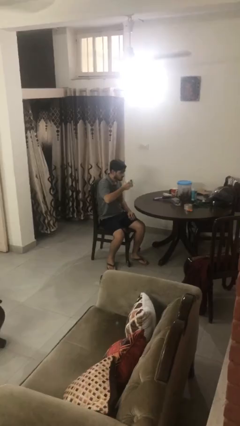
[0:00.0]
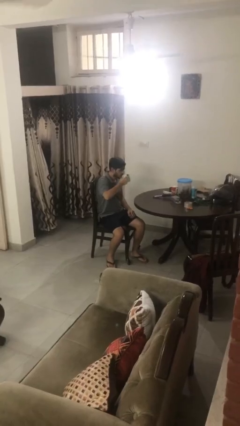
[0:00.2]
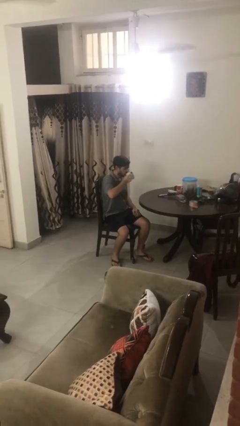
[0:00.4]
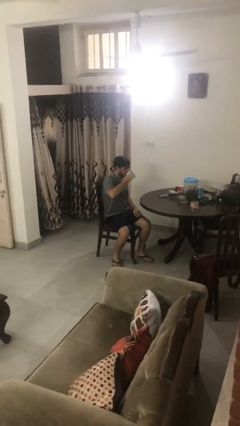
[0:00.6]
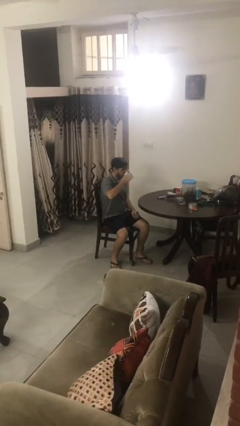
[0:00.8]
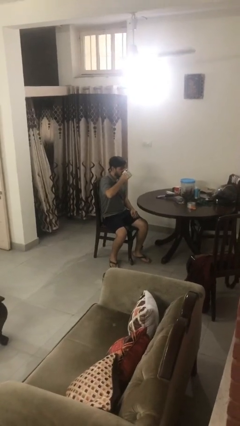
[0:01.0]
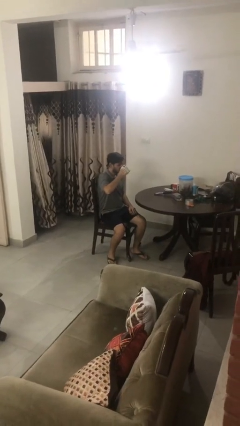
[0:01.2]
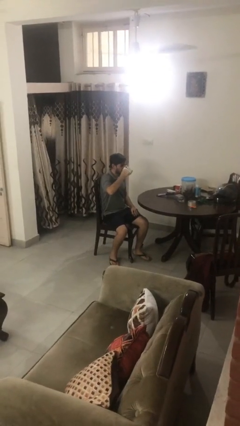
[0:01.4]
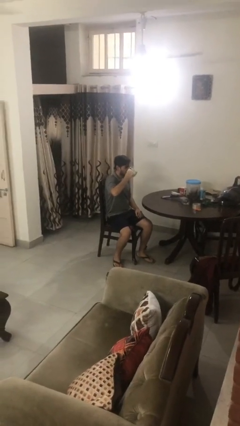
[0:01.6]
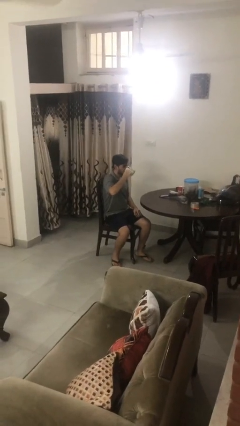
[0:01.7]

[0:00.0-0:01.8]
person drinks from mug

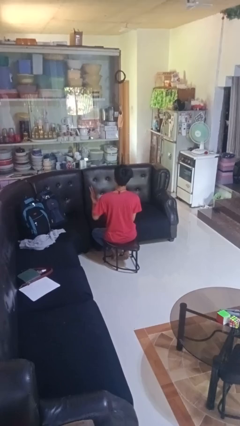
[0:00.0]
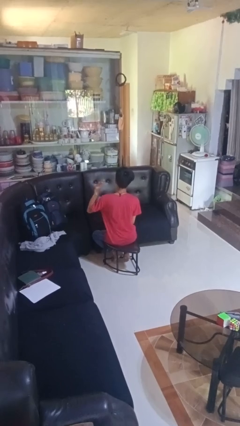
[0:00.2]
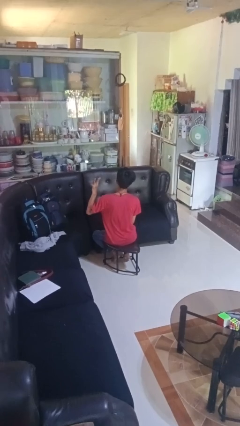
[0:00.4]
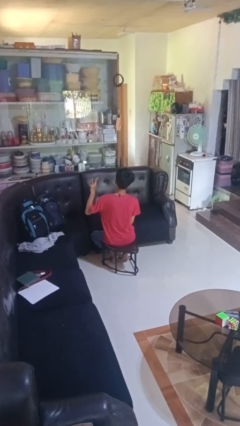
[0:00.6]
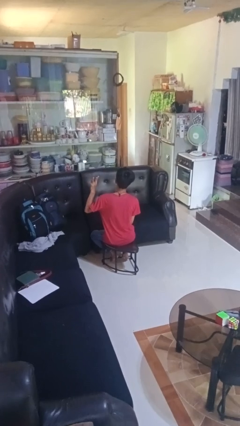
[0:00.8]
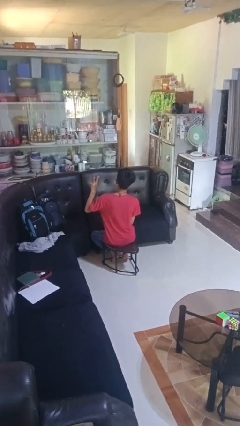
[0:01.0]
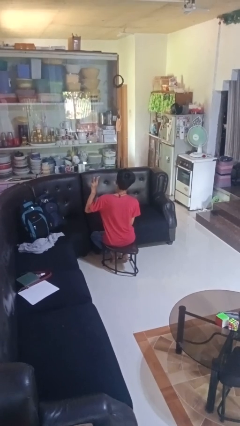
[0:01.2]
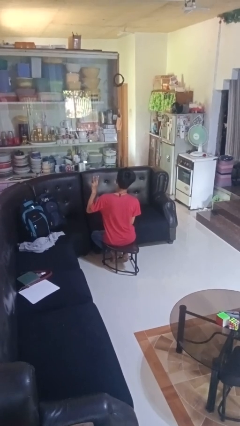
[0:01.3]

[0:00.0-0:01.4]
person gestures number three

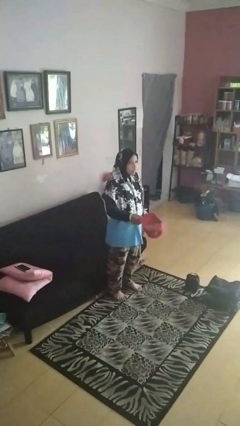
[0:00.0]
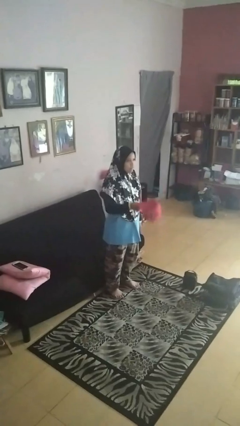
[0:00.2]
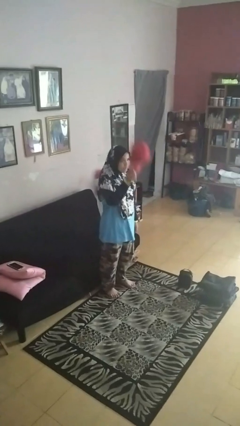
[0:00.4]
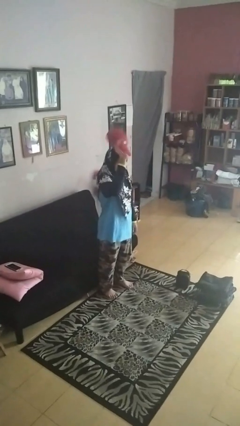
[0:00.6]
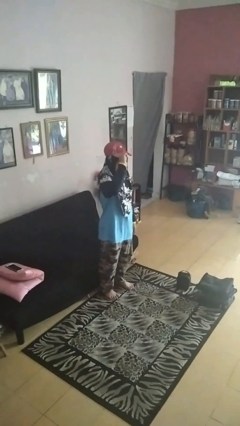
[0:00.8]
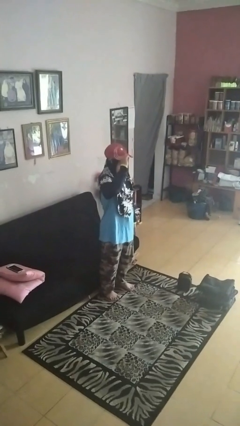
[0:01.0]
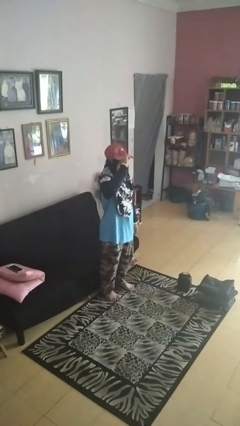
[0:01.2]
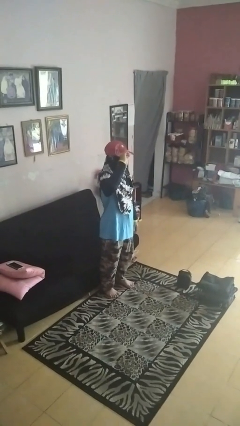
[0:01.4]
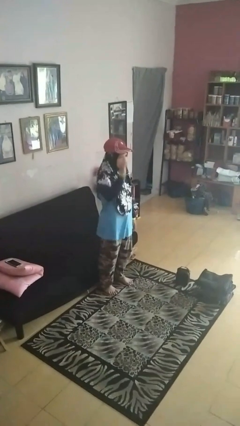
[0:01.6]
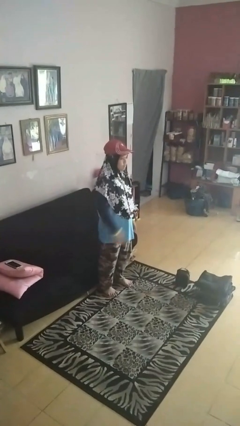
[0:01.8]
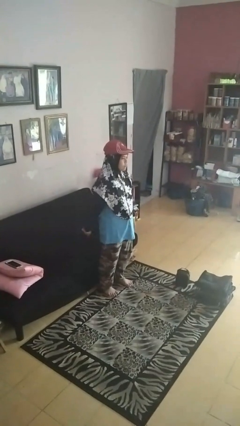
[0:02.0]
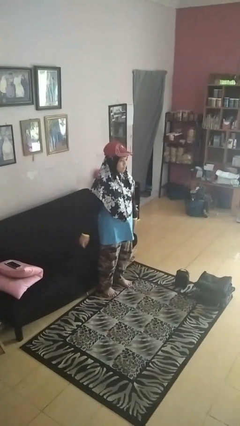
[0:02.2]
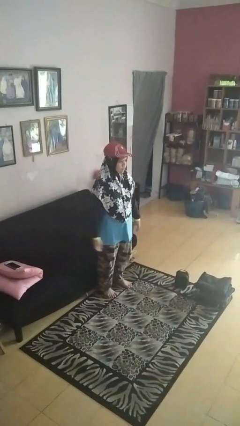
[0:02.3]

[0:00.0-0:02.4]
person puts on hat

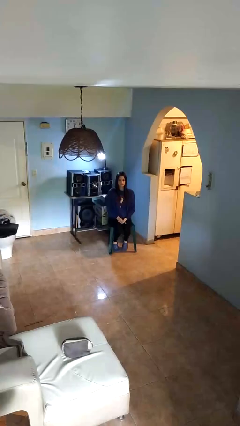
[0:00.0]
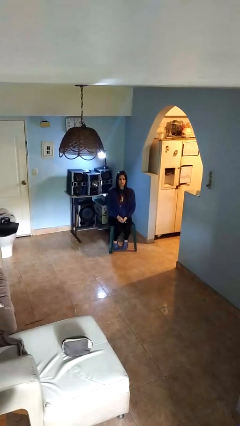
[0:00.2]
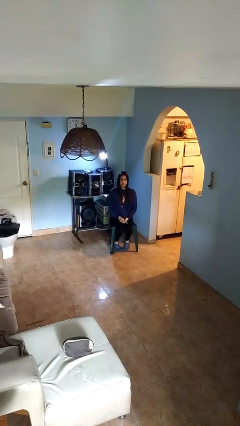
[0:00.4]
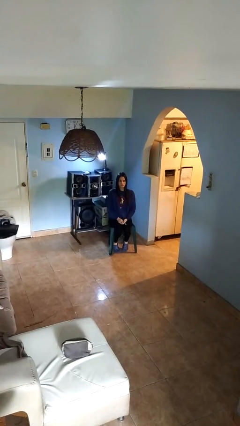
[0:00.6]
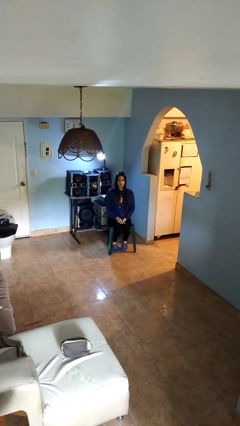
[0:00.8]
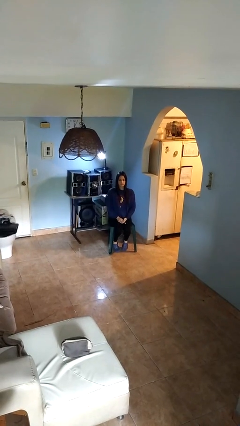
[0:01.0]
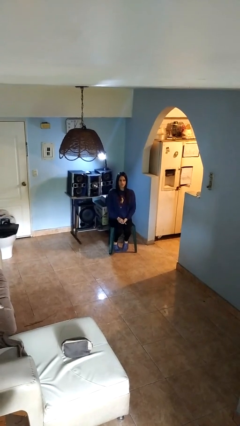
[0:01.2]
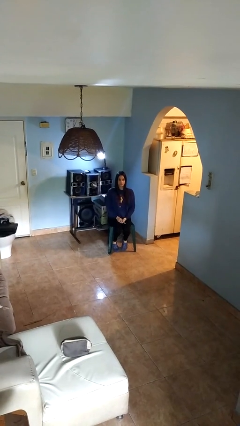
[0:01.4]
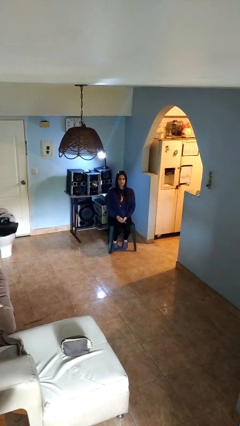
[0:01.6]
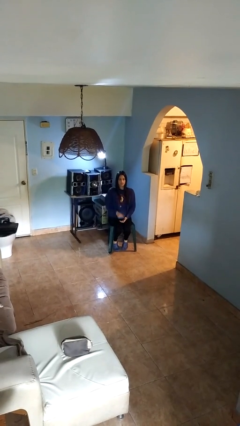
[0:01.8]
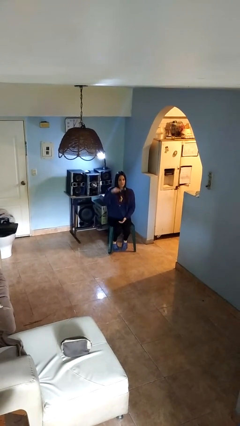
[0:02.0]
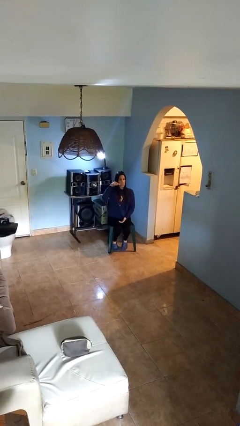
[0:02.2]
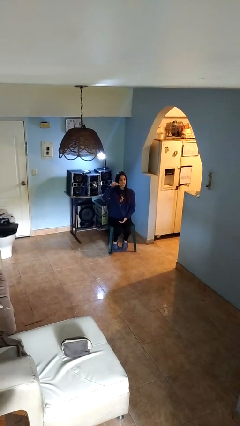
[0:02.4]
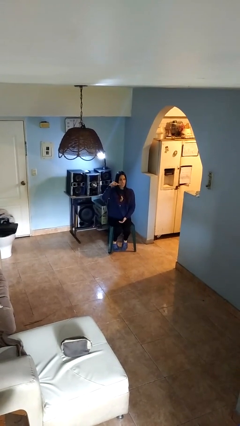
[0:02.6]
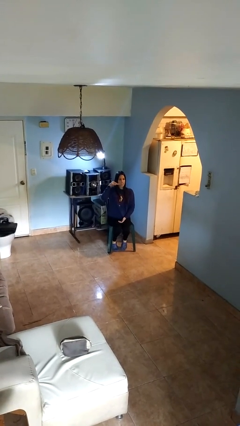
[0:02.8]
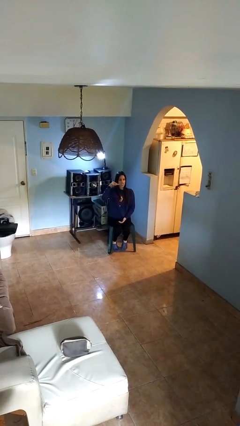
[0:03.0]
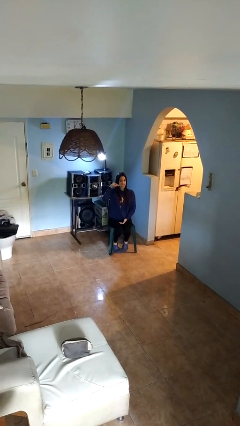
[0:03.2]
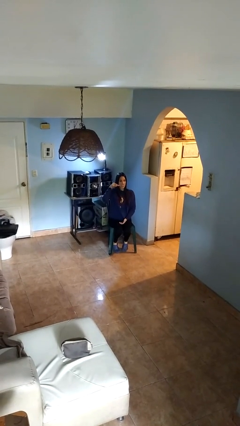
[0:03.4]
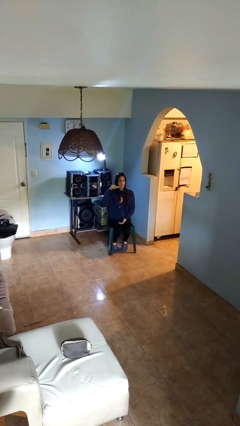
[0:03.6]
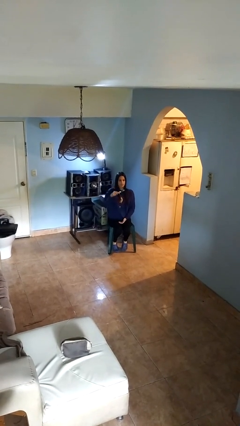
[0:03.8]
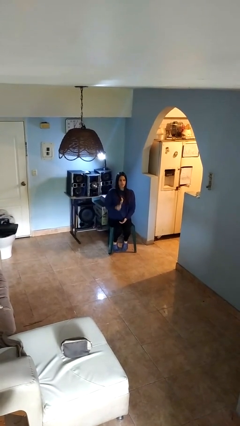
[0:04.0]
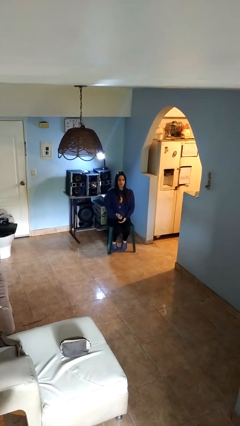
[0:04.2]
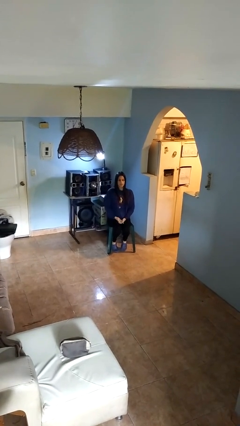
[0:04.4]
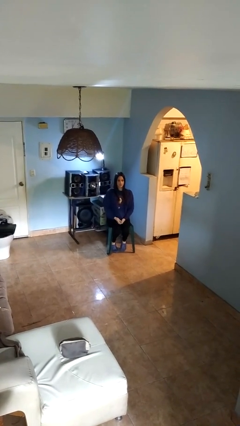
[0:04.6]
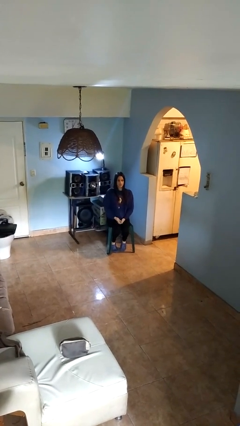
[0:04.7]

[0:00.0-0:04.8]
person brushes teeth

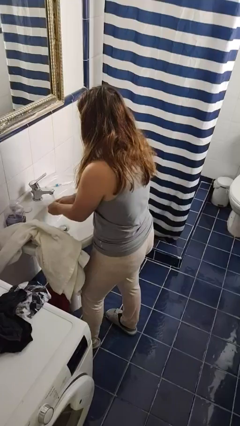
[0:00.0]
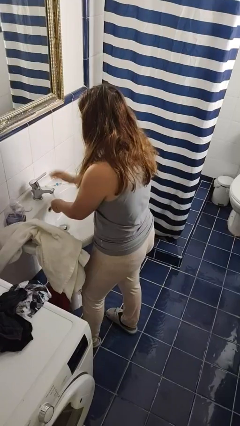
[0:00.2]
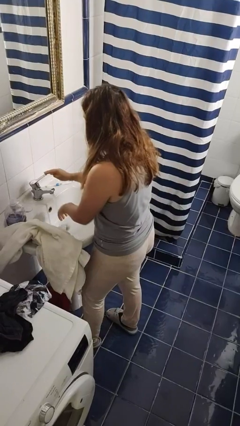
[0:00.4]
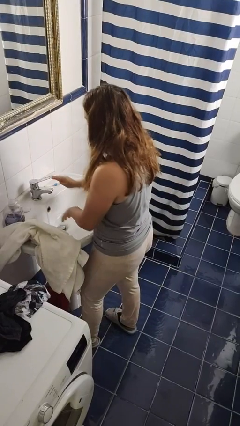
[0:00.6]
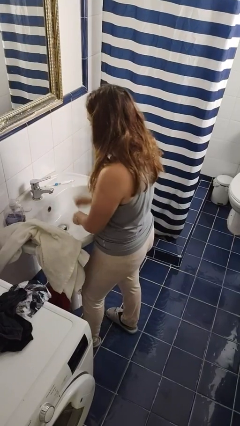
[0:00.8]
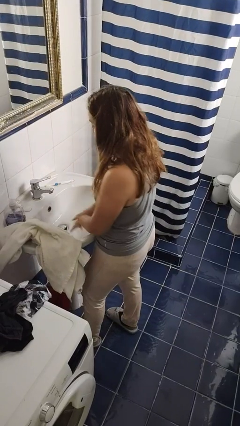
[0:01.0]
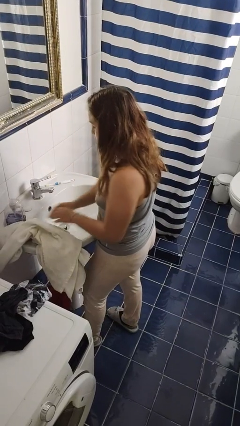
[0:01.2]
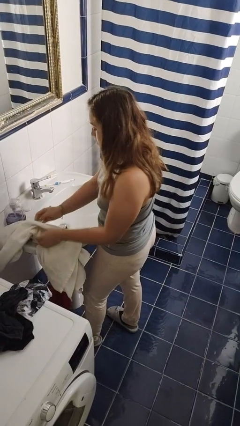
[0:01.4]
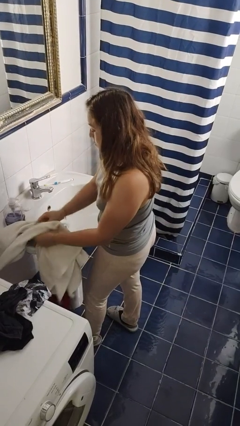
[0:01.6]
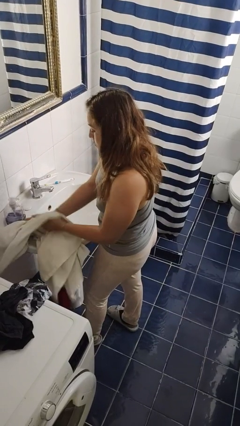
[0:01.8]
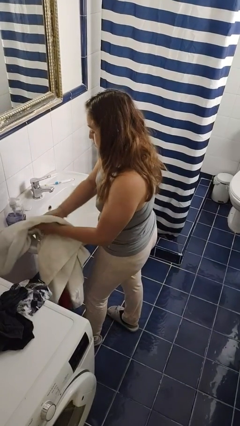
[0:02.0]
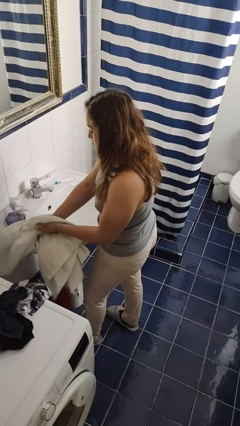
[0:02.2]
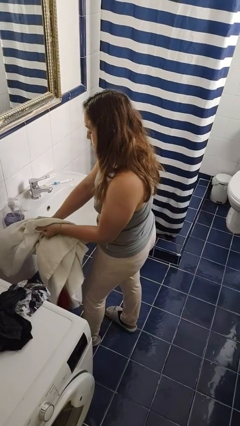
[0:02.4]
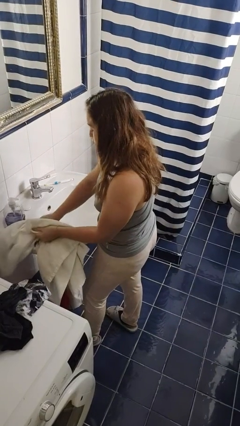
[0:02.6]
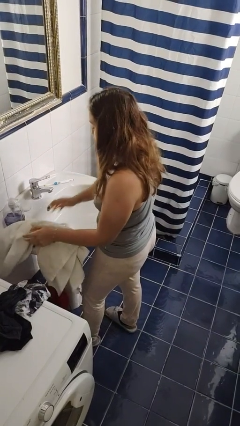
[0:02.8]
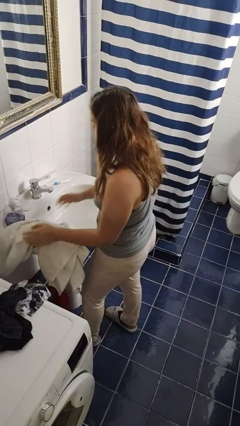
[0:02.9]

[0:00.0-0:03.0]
person dries hands with towel

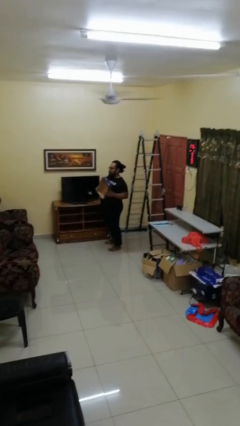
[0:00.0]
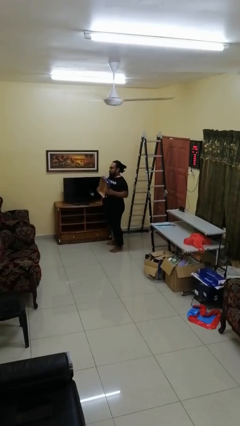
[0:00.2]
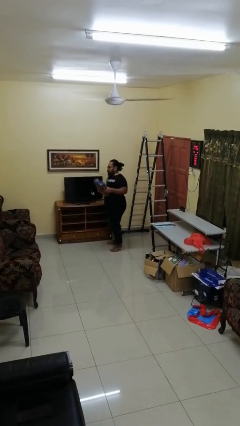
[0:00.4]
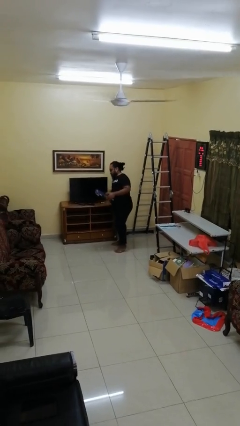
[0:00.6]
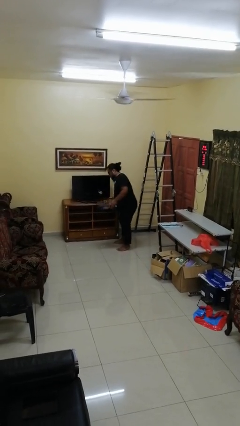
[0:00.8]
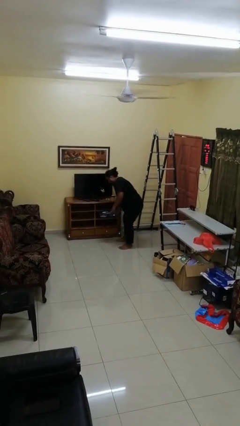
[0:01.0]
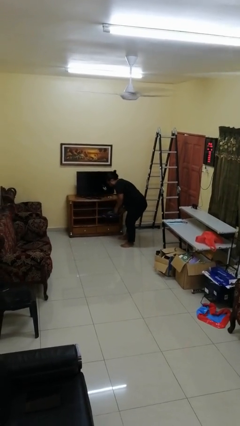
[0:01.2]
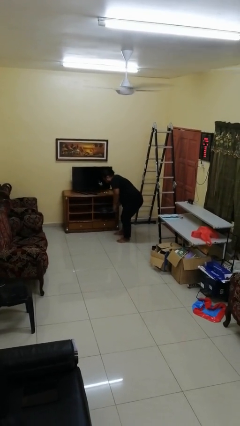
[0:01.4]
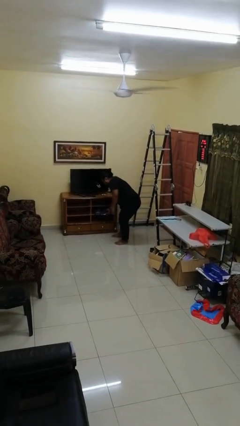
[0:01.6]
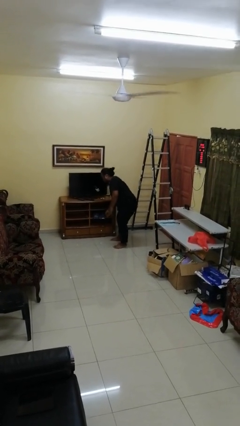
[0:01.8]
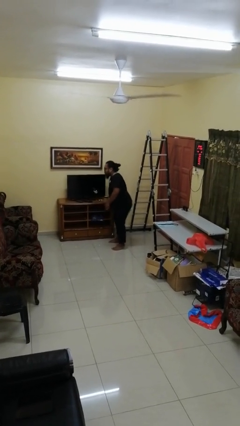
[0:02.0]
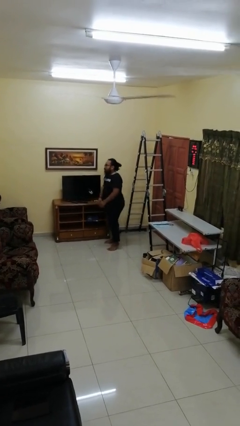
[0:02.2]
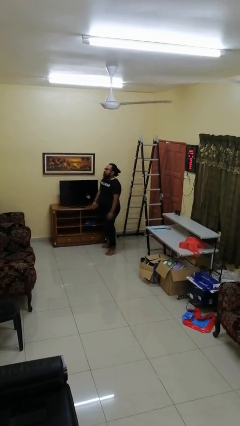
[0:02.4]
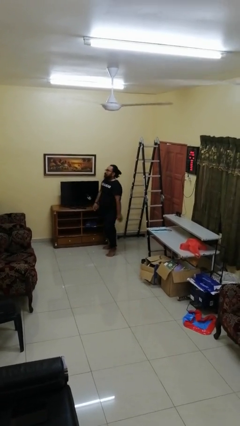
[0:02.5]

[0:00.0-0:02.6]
person puts down object into cabinet

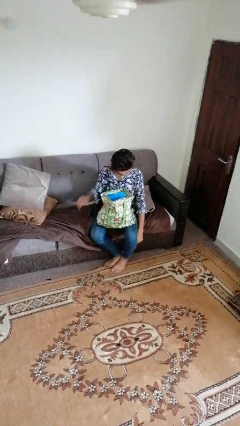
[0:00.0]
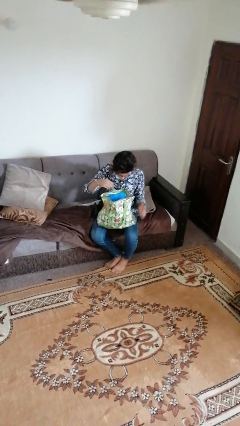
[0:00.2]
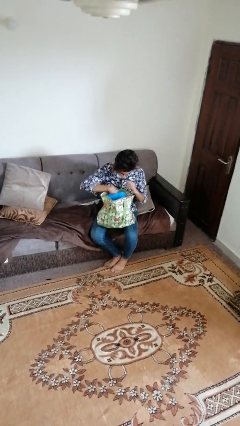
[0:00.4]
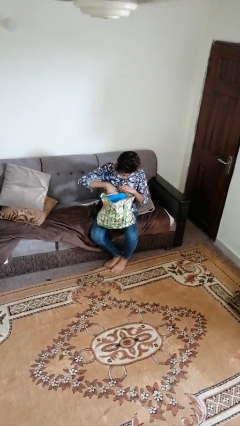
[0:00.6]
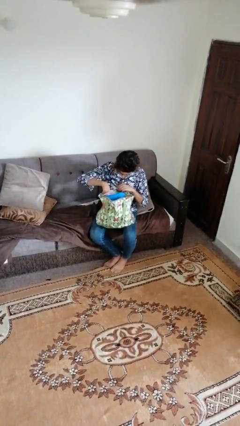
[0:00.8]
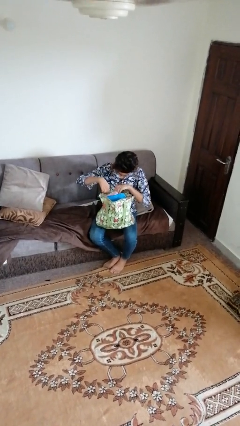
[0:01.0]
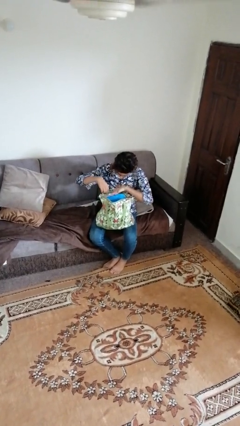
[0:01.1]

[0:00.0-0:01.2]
person searches in bag

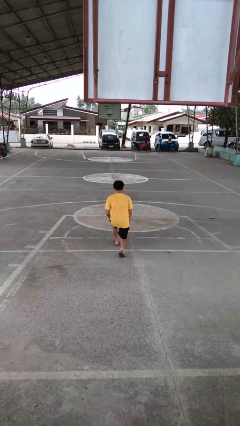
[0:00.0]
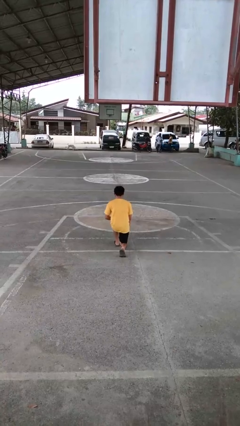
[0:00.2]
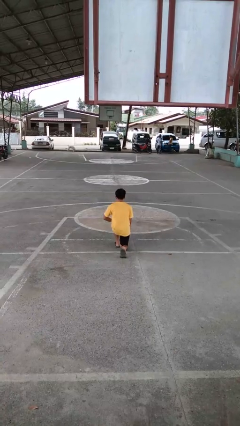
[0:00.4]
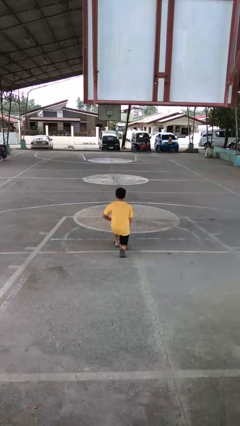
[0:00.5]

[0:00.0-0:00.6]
person kneels
